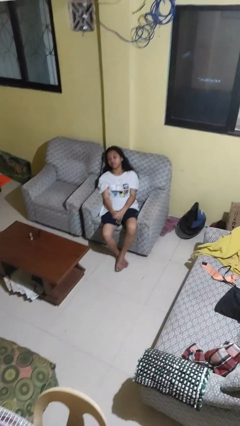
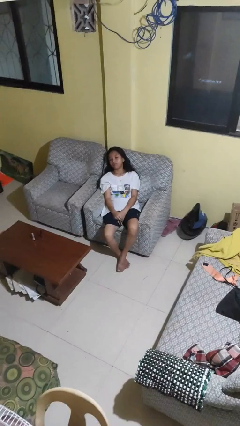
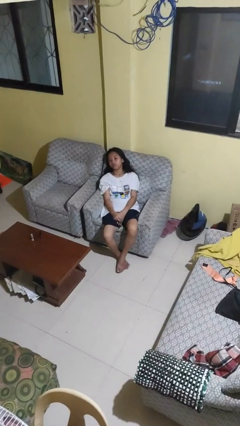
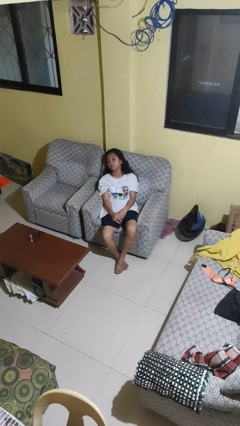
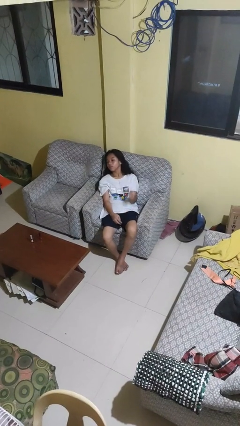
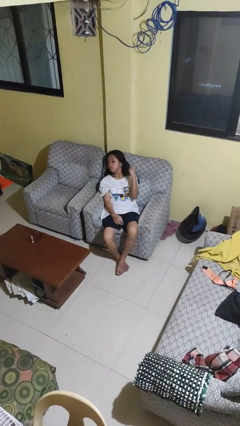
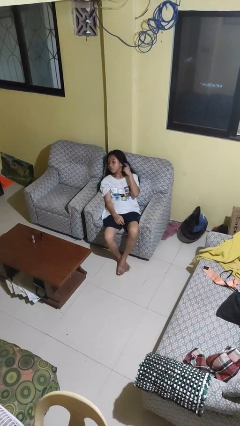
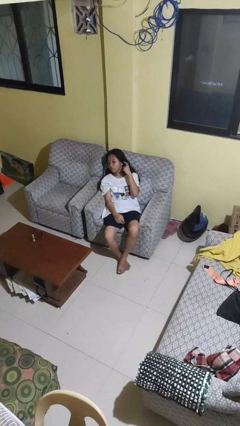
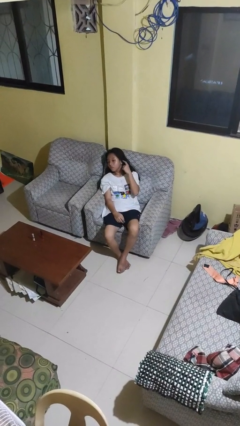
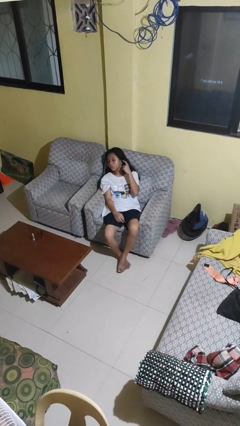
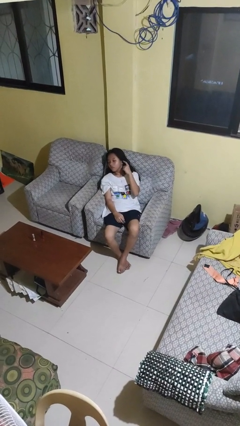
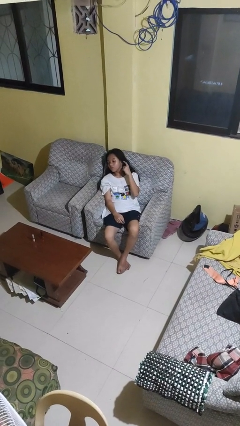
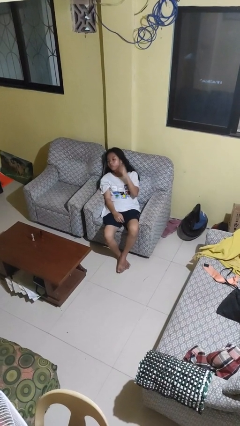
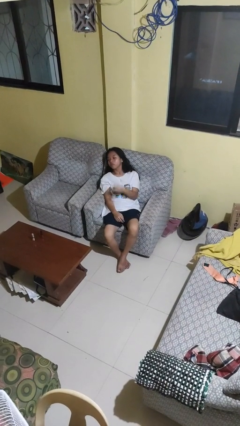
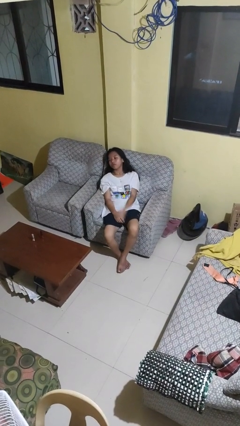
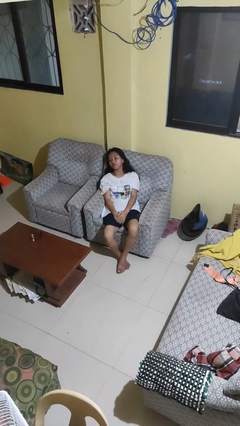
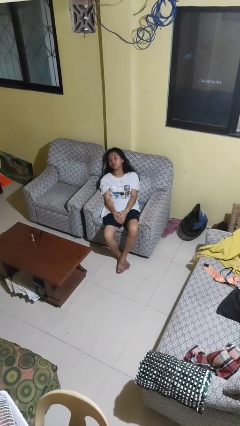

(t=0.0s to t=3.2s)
person gestures listen closely

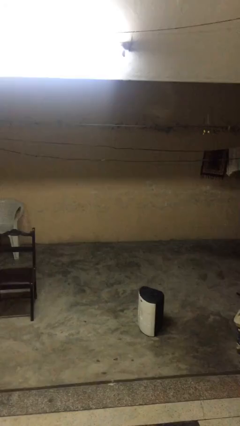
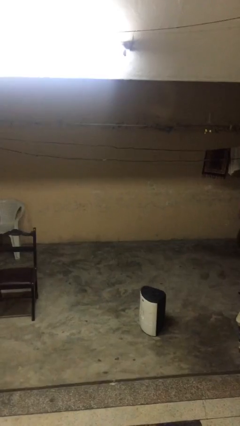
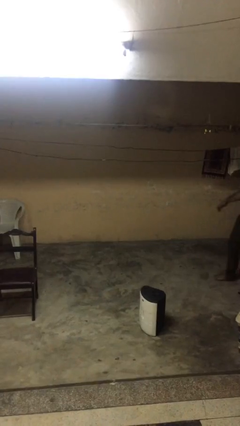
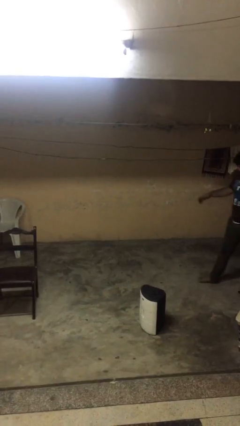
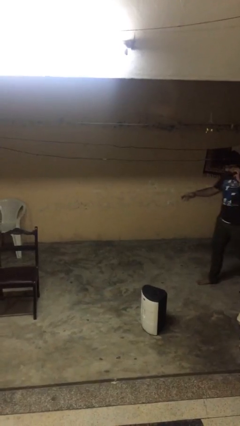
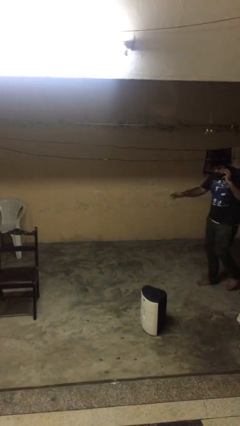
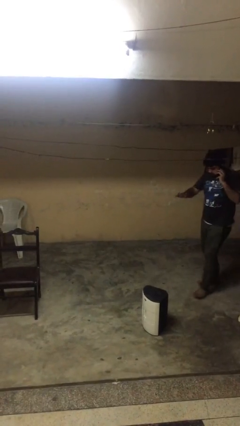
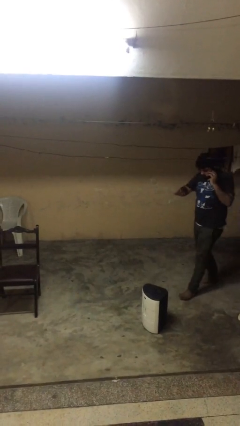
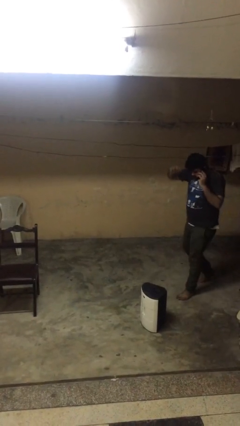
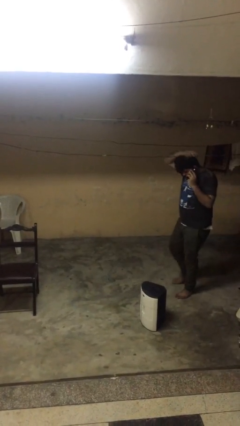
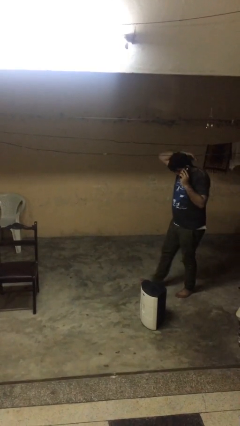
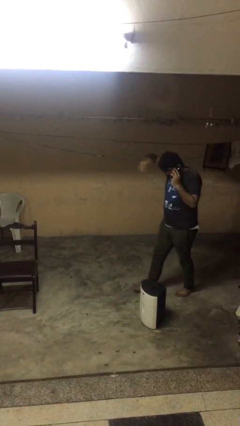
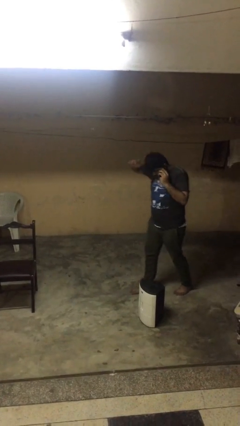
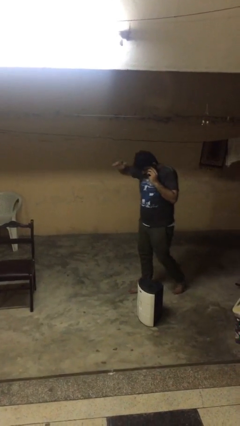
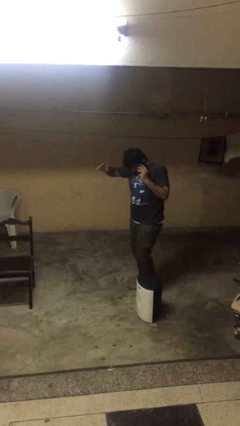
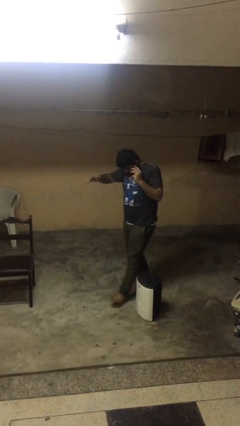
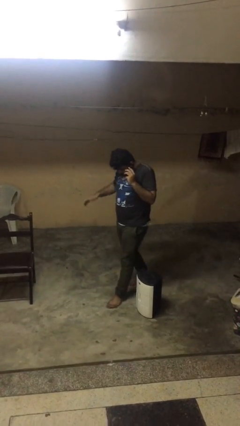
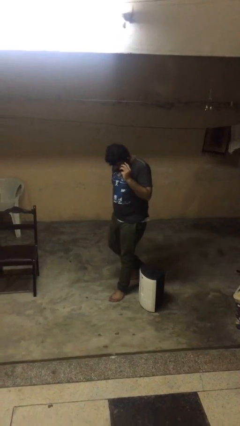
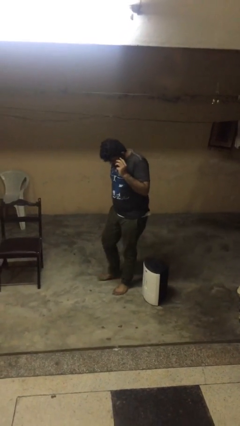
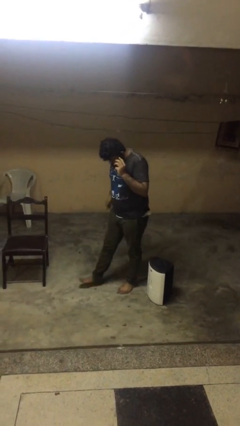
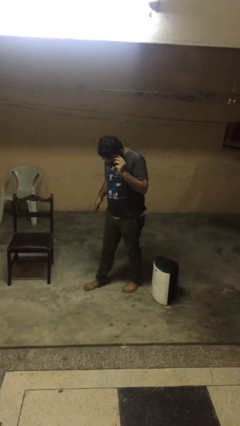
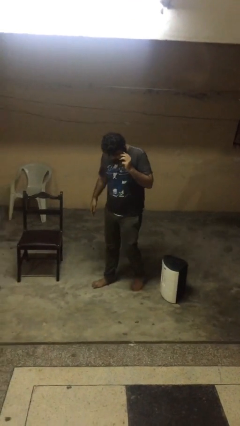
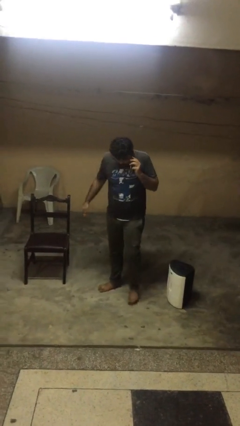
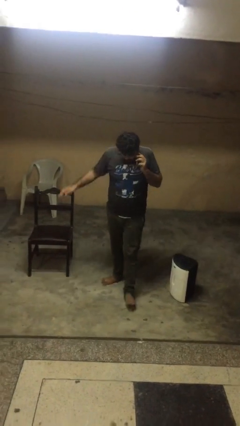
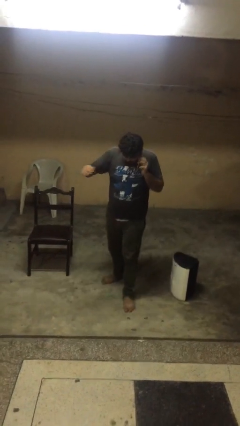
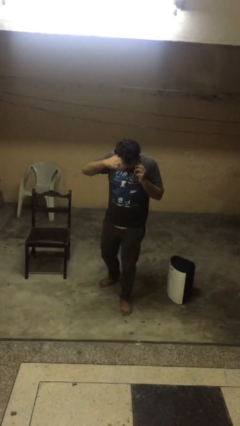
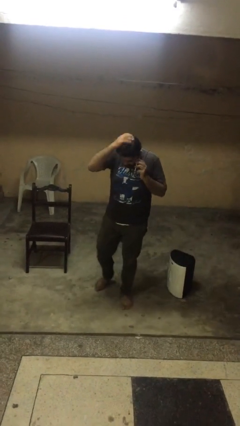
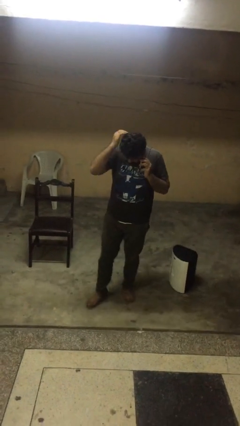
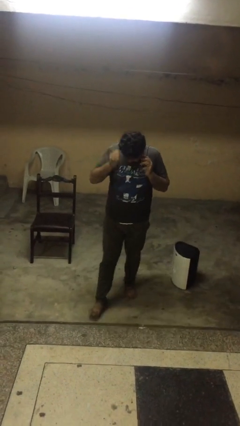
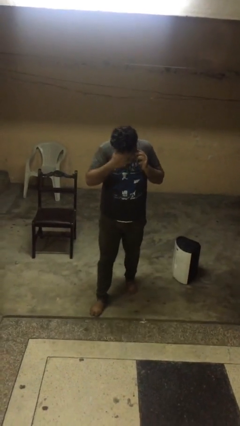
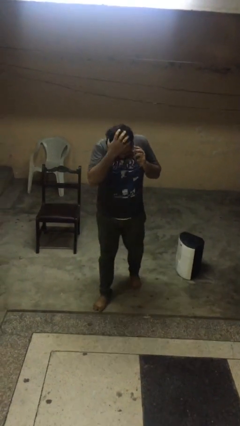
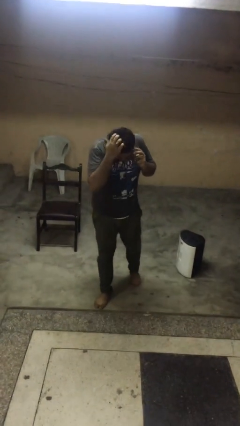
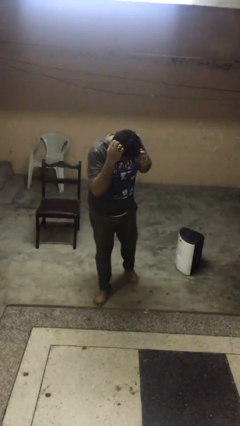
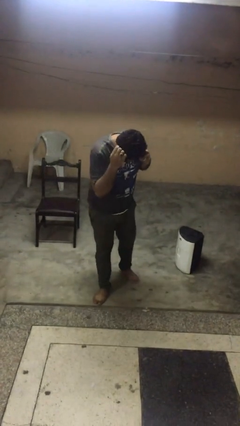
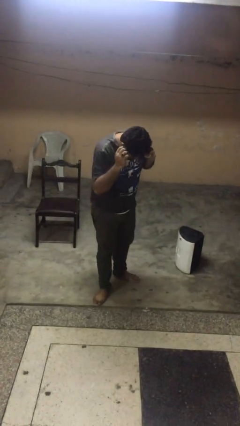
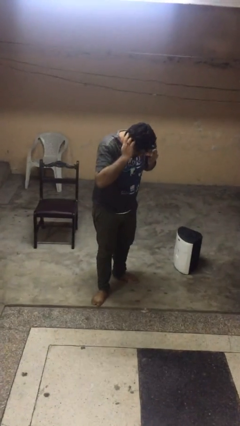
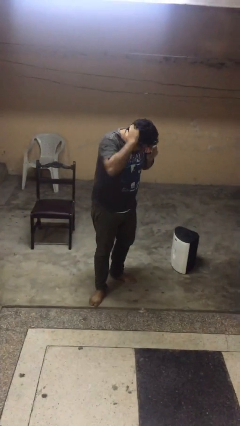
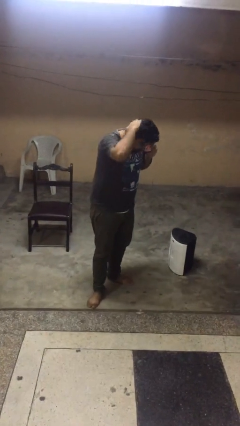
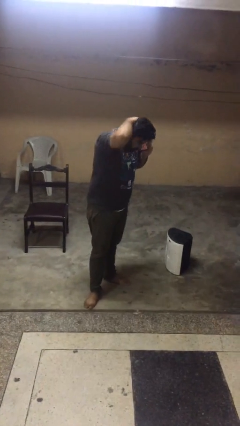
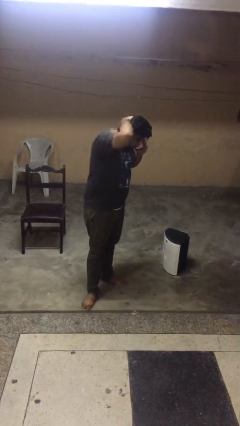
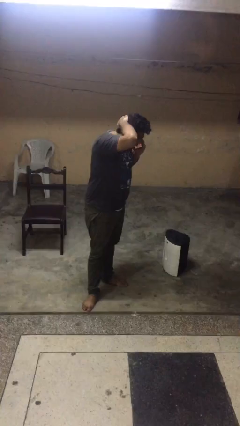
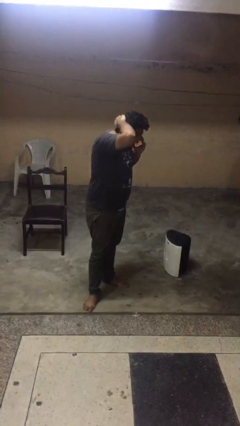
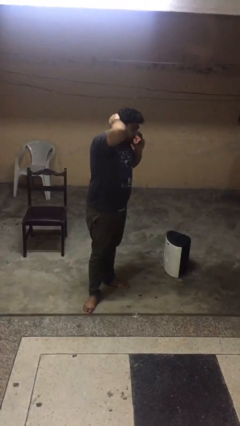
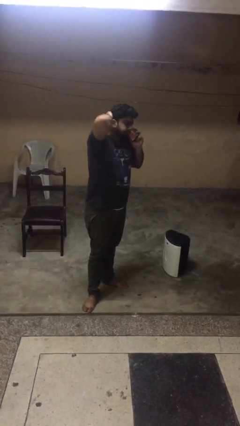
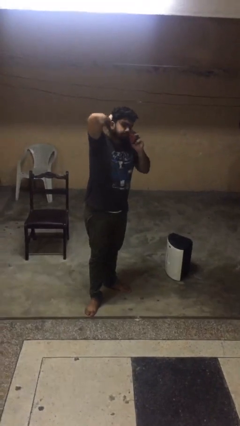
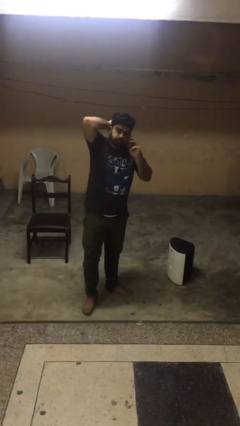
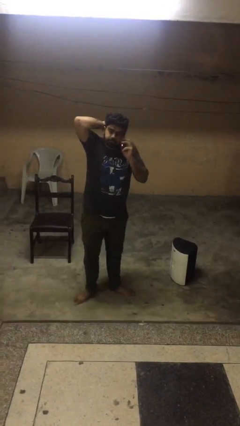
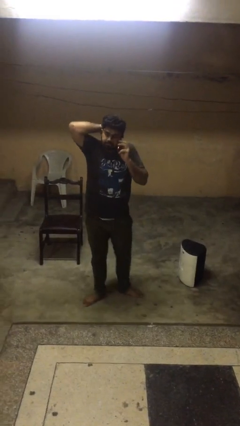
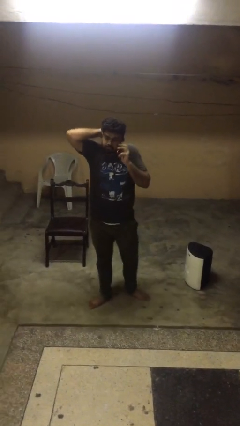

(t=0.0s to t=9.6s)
person enters scene through structure

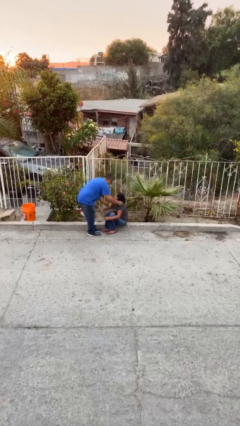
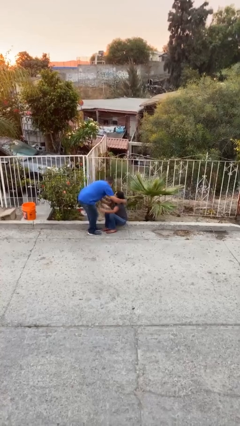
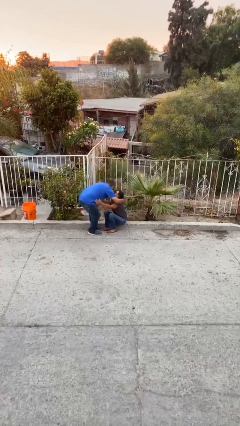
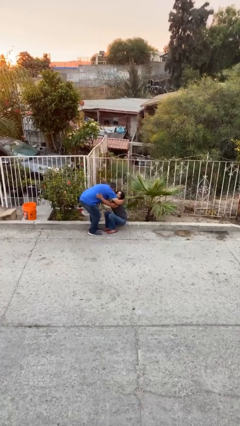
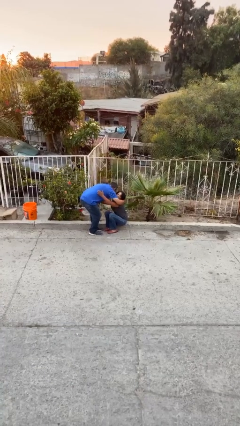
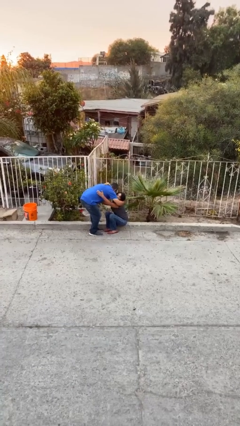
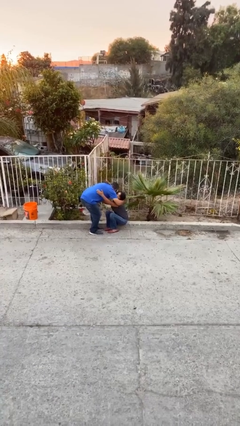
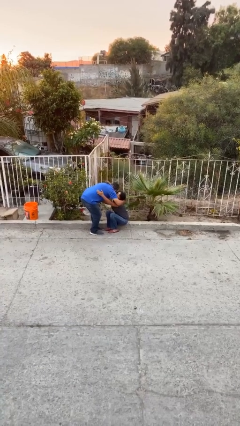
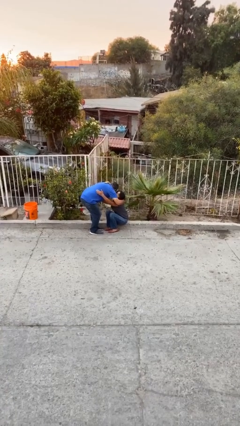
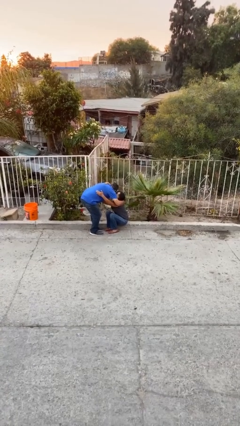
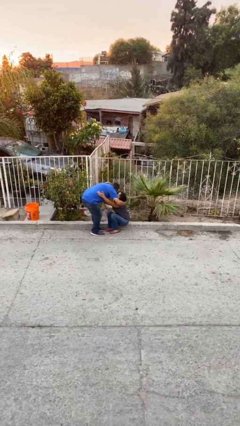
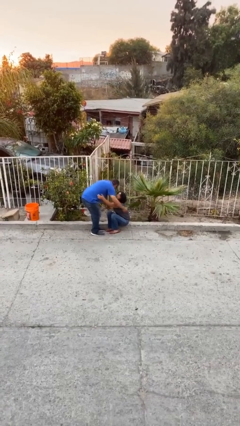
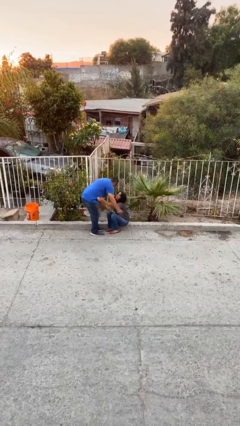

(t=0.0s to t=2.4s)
person embraces person

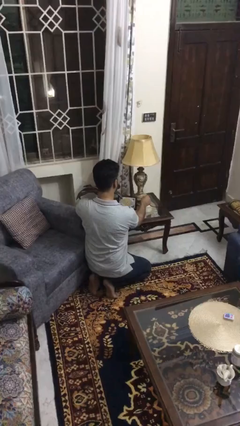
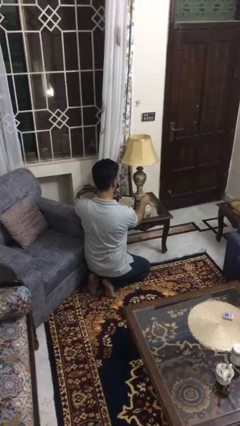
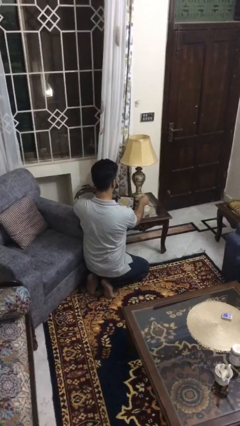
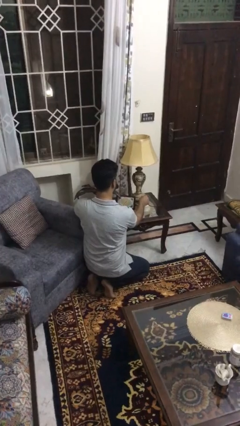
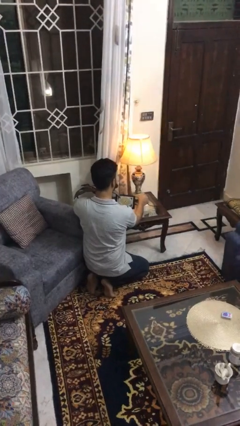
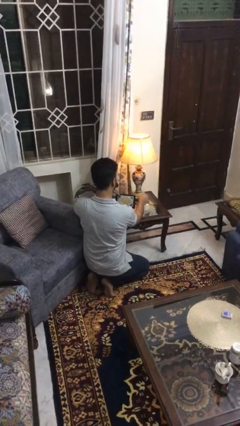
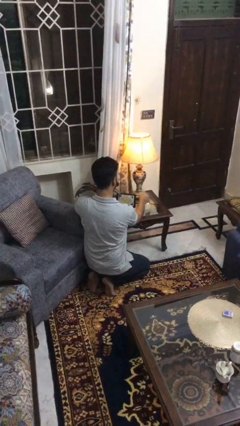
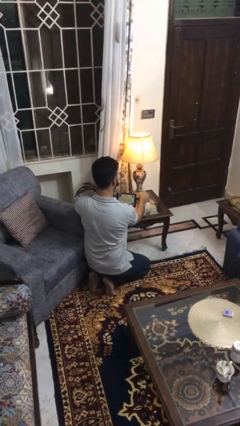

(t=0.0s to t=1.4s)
person turns on lamp

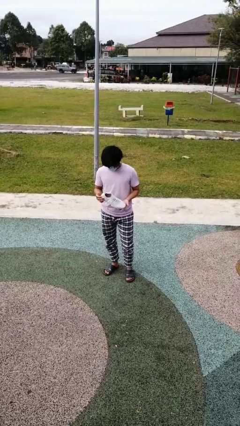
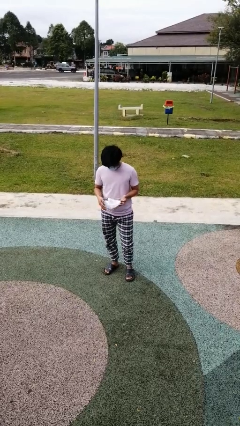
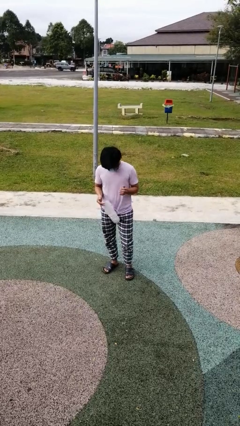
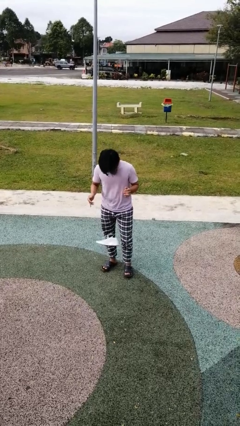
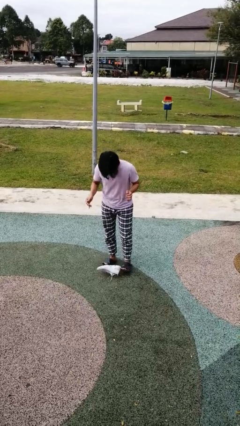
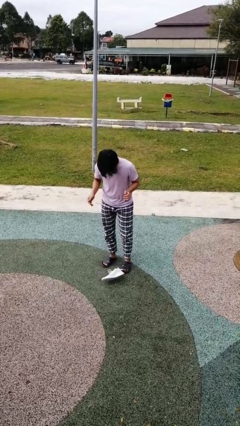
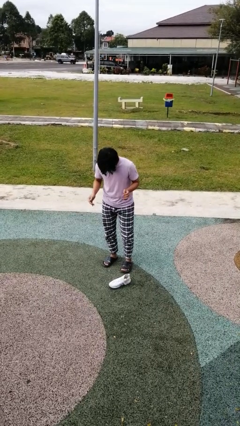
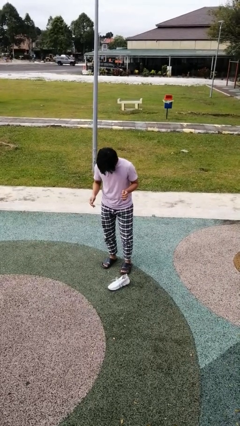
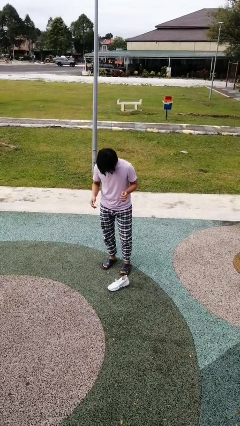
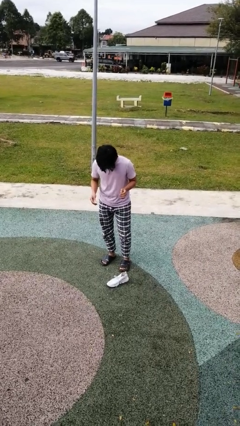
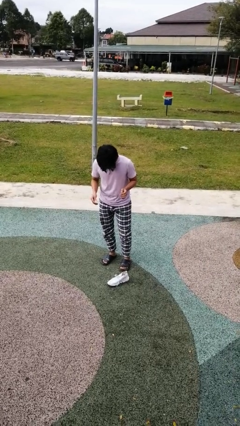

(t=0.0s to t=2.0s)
person drops object
